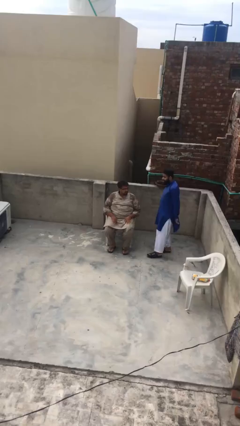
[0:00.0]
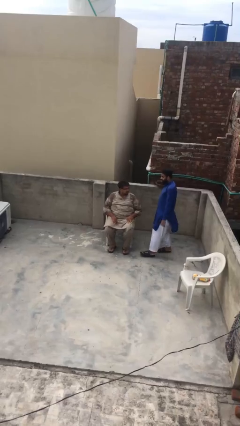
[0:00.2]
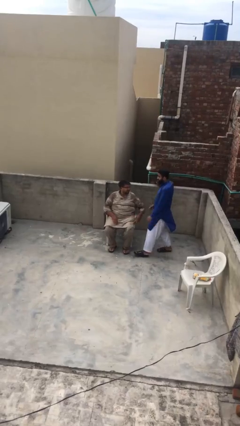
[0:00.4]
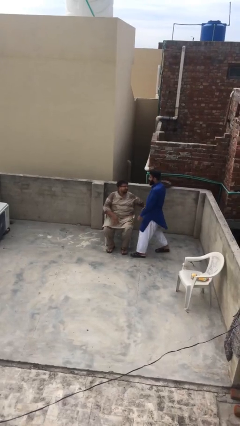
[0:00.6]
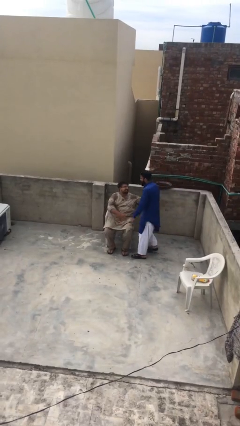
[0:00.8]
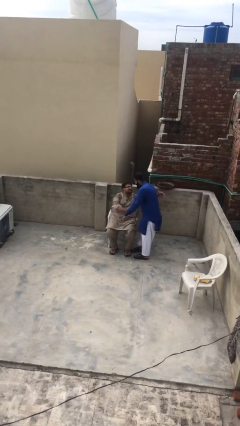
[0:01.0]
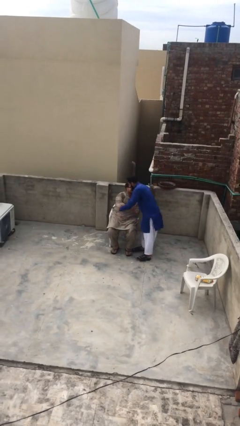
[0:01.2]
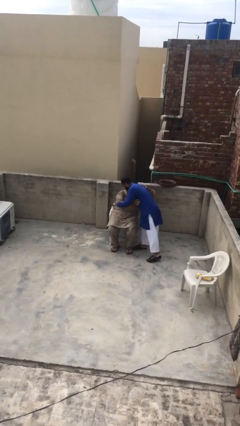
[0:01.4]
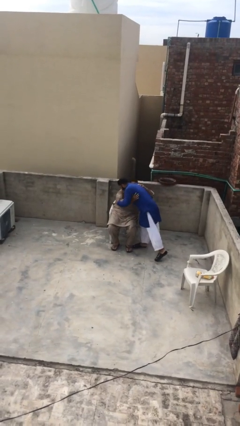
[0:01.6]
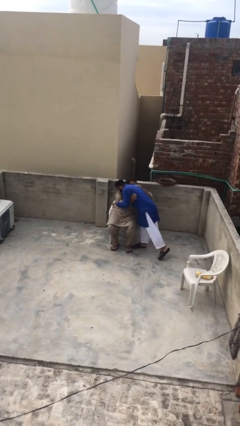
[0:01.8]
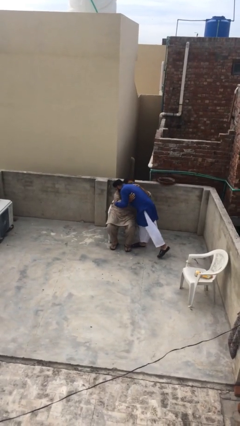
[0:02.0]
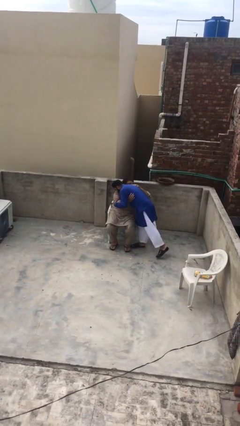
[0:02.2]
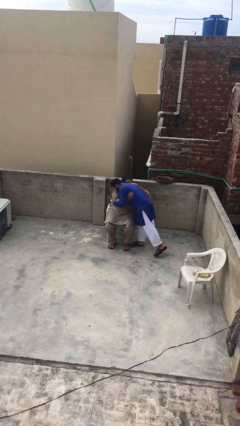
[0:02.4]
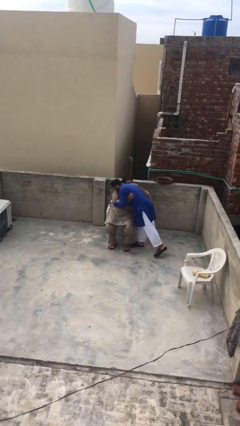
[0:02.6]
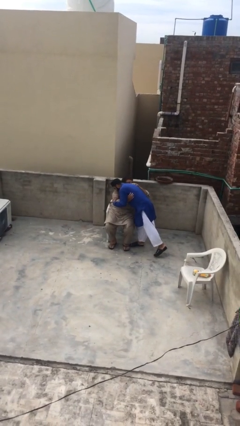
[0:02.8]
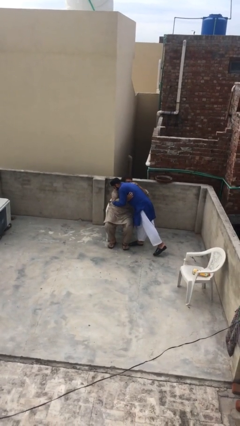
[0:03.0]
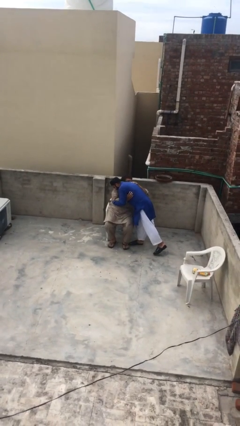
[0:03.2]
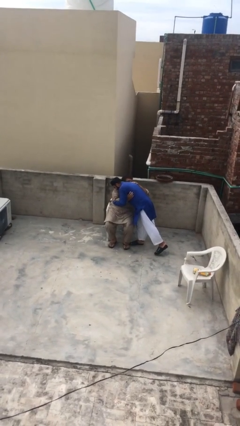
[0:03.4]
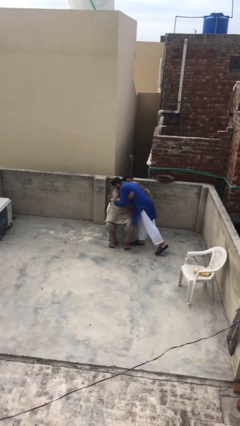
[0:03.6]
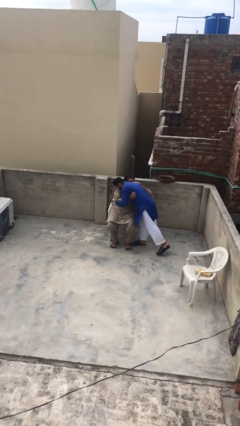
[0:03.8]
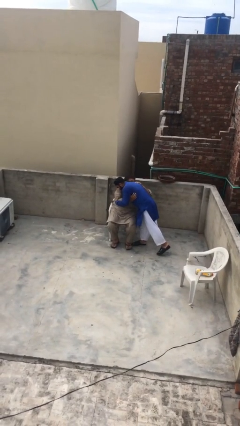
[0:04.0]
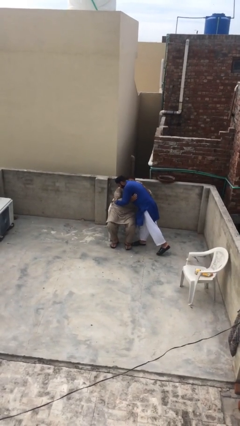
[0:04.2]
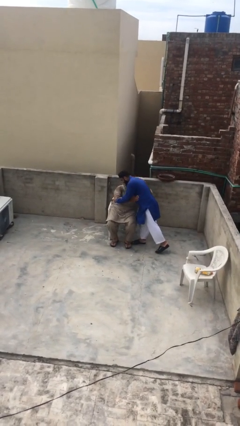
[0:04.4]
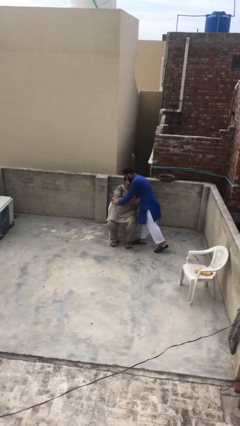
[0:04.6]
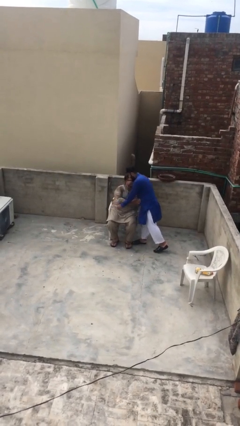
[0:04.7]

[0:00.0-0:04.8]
person embraces person

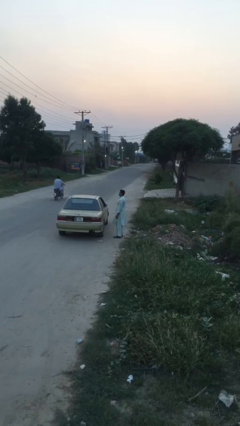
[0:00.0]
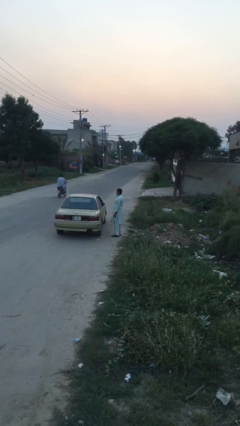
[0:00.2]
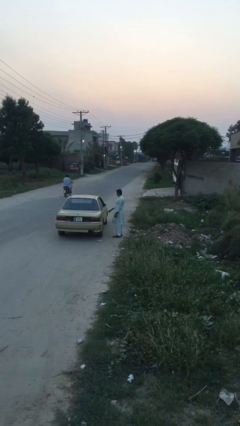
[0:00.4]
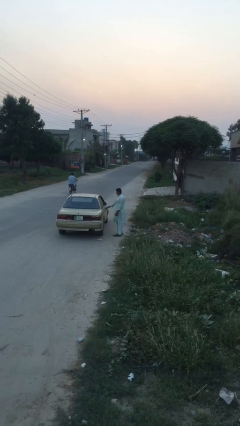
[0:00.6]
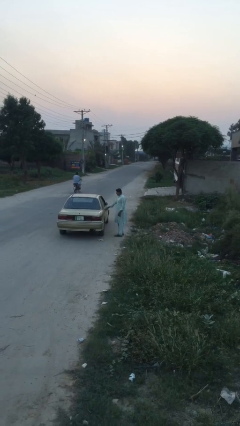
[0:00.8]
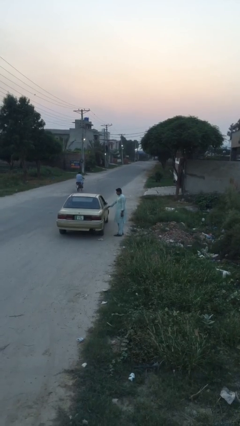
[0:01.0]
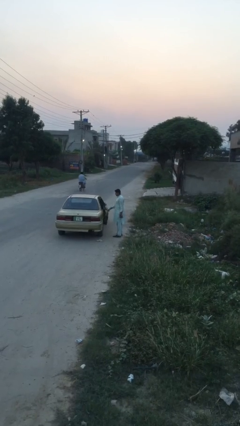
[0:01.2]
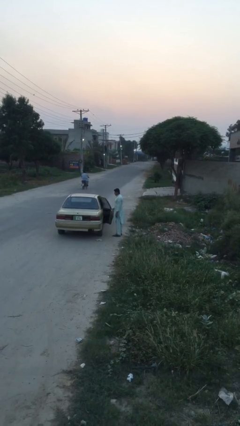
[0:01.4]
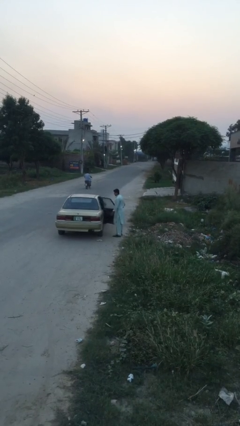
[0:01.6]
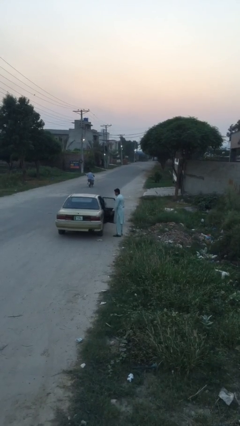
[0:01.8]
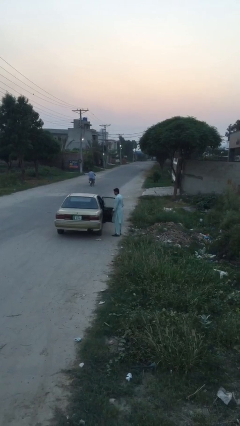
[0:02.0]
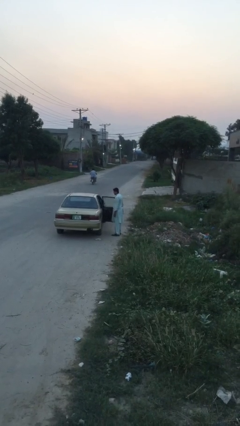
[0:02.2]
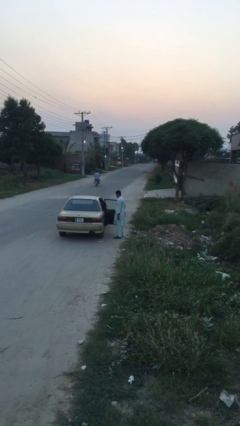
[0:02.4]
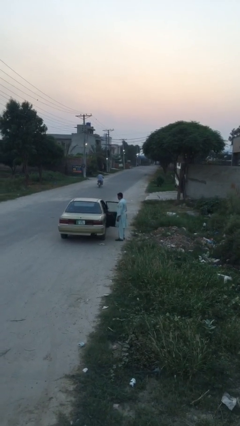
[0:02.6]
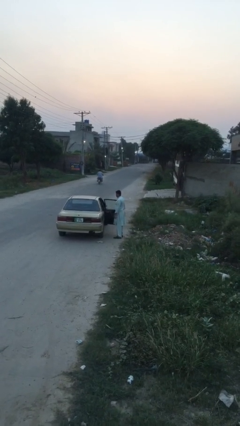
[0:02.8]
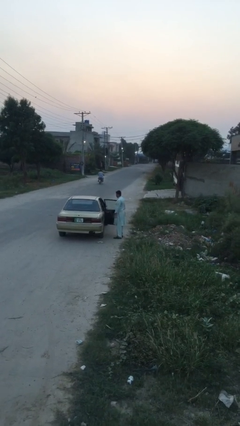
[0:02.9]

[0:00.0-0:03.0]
person opens car door

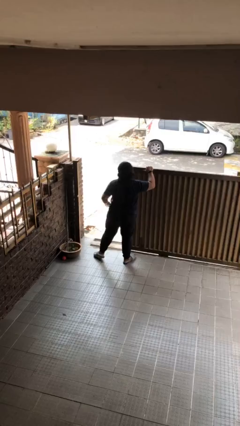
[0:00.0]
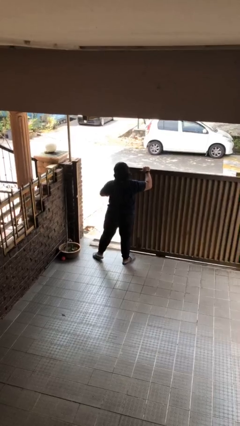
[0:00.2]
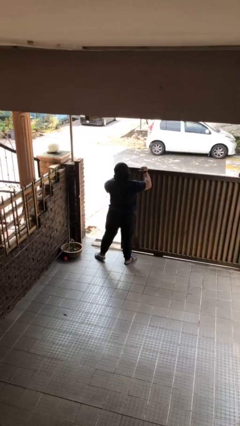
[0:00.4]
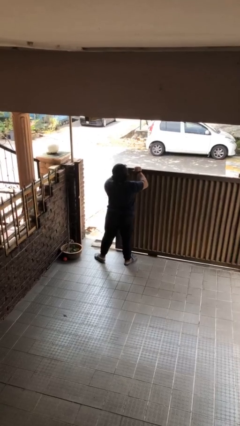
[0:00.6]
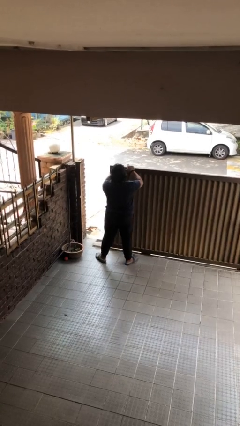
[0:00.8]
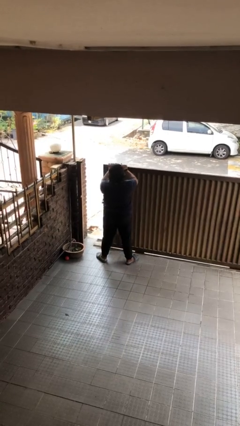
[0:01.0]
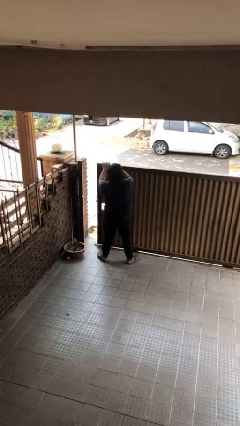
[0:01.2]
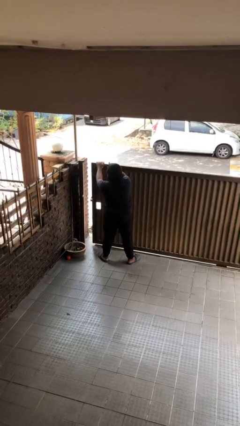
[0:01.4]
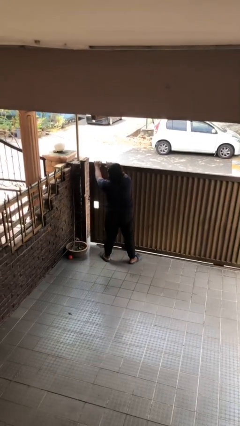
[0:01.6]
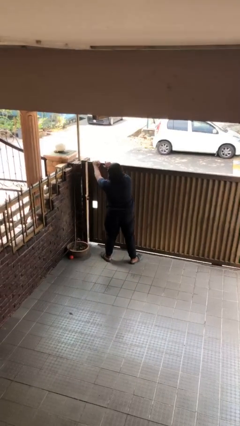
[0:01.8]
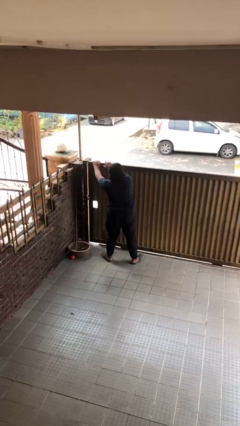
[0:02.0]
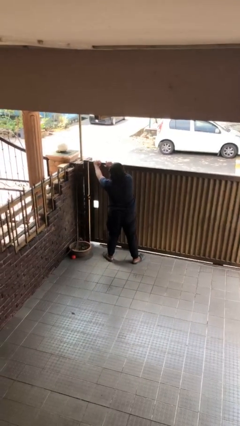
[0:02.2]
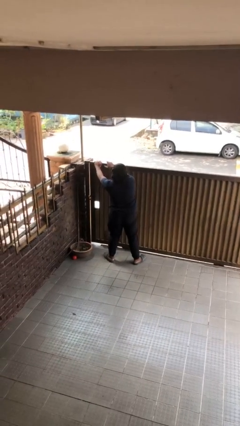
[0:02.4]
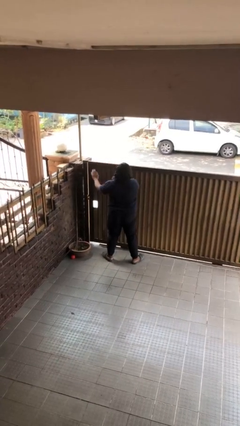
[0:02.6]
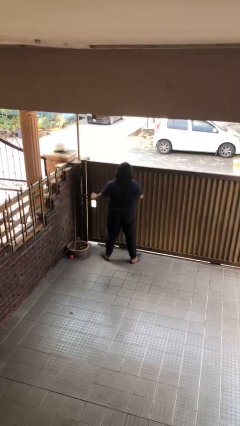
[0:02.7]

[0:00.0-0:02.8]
person closes facility door

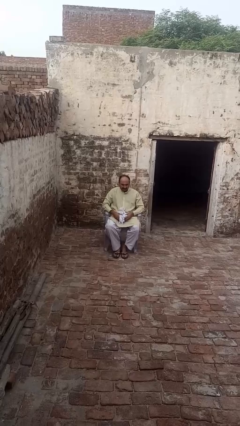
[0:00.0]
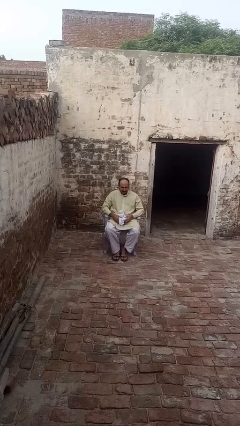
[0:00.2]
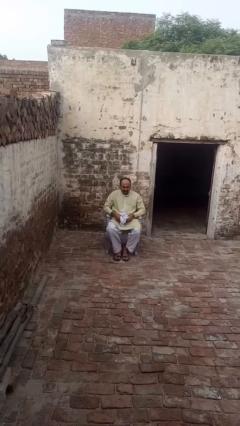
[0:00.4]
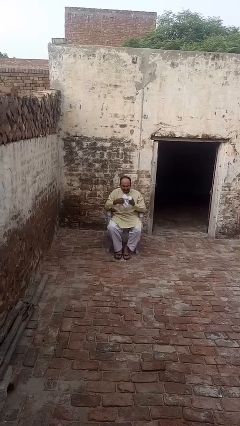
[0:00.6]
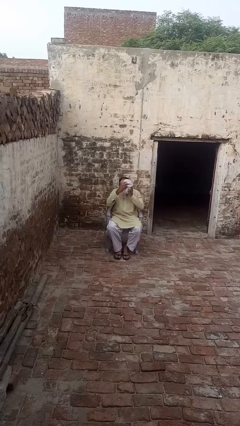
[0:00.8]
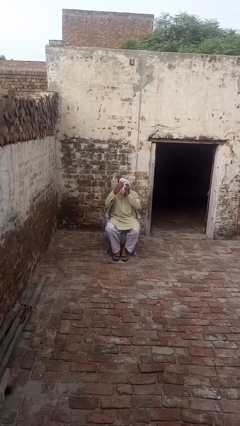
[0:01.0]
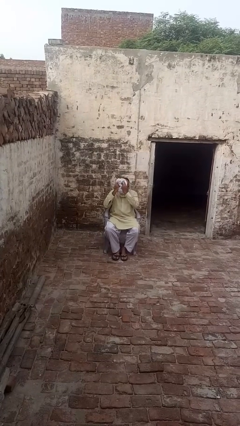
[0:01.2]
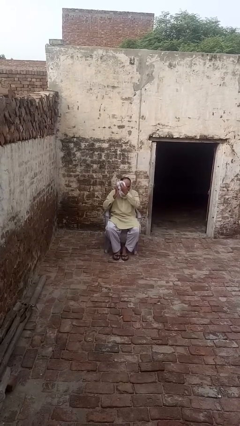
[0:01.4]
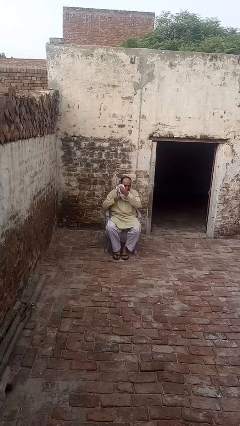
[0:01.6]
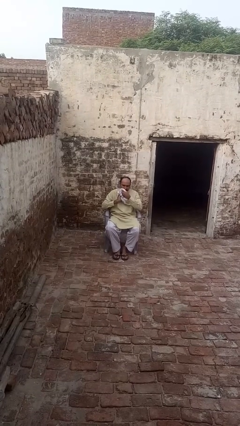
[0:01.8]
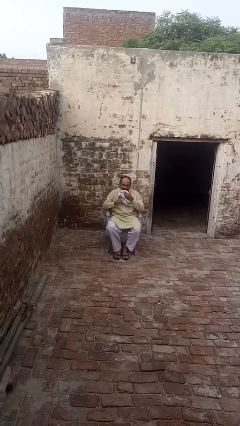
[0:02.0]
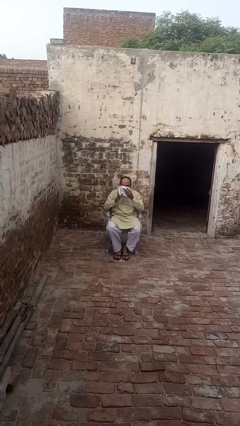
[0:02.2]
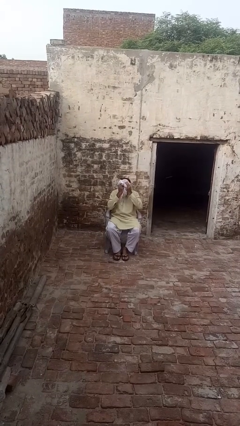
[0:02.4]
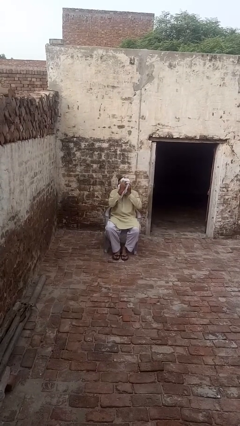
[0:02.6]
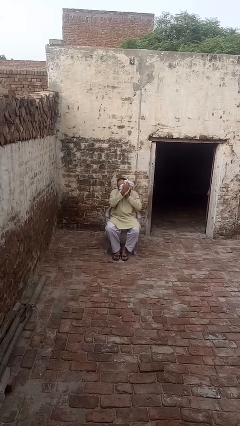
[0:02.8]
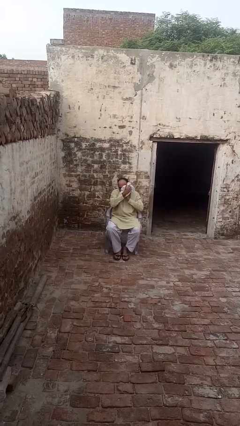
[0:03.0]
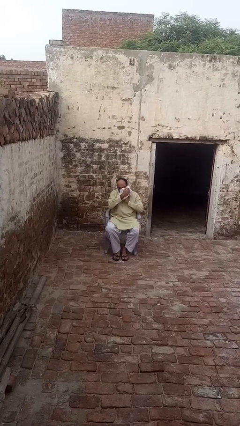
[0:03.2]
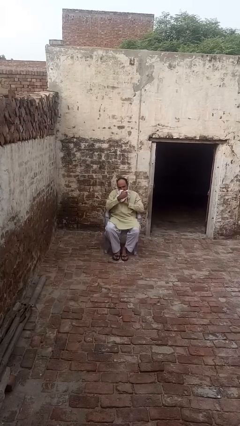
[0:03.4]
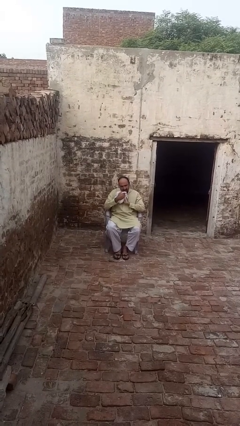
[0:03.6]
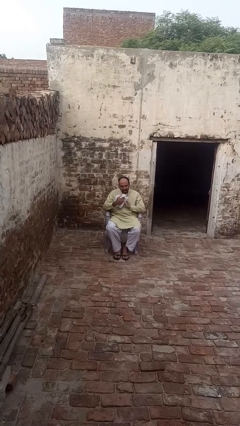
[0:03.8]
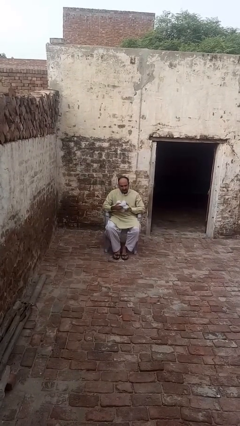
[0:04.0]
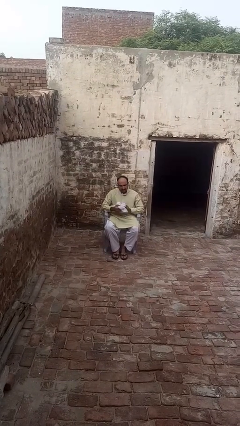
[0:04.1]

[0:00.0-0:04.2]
person wipes mouth with napkin

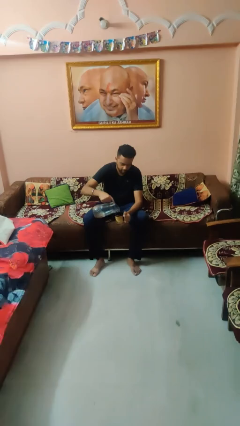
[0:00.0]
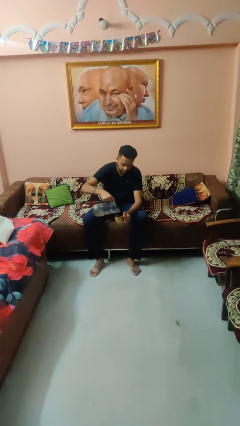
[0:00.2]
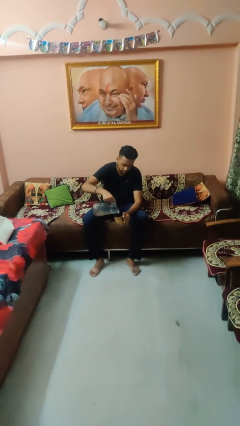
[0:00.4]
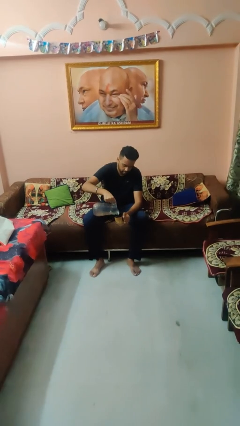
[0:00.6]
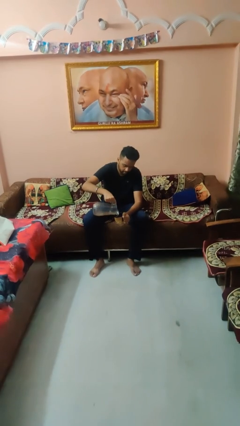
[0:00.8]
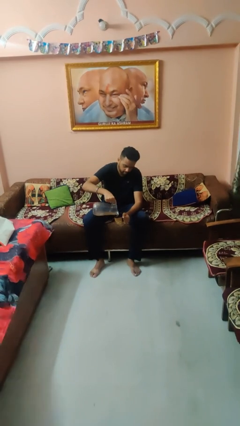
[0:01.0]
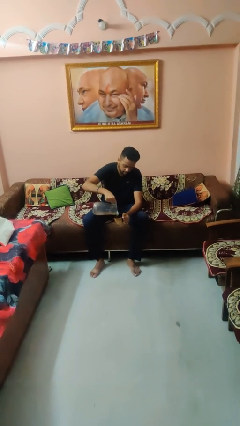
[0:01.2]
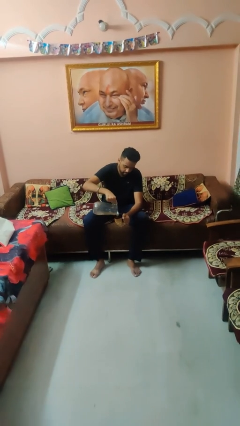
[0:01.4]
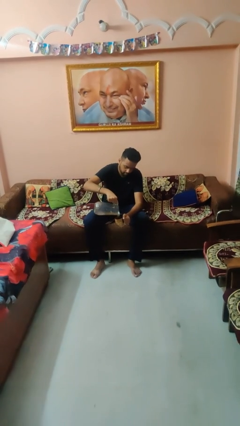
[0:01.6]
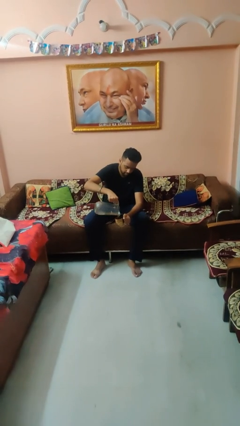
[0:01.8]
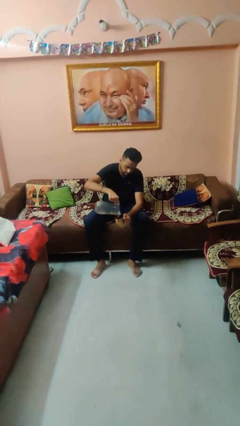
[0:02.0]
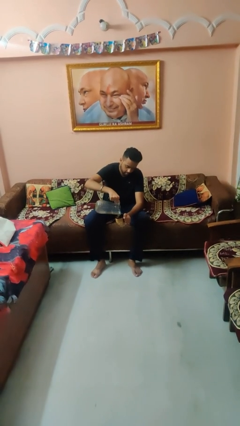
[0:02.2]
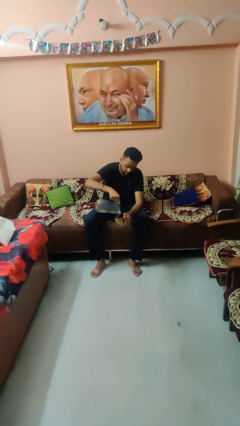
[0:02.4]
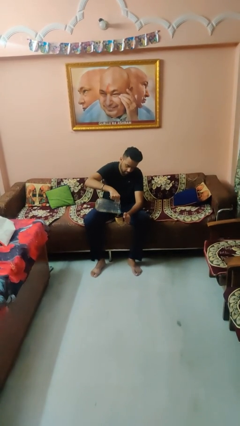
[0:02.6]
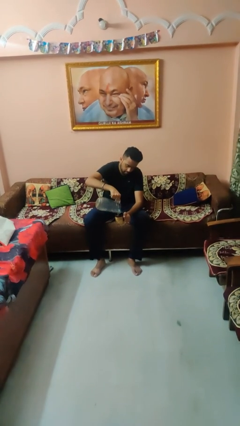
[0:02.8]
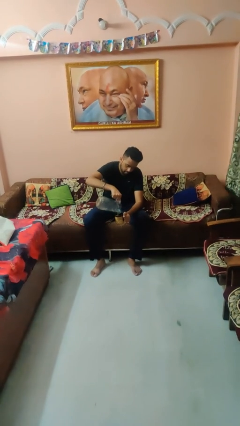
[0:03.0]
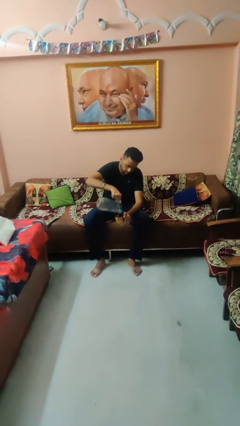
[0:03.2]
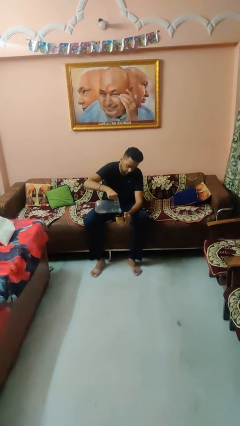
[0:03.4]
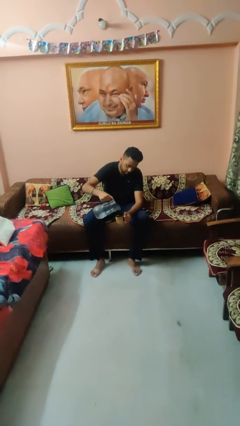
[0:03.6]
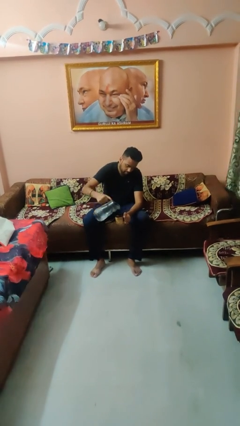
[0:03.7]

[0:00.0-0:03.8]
person pours coffee into mug
